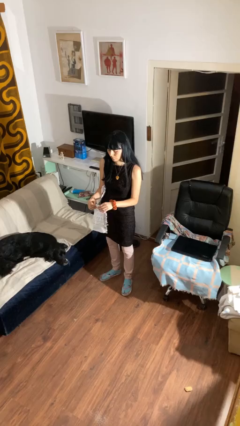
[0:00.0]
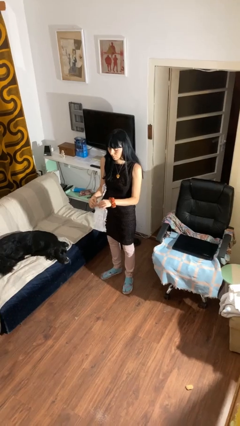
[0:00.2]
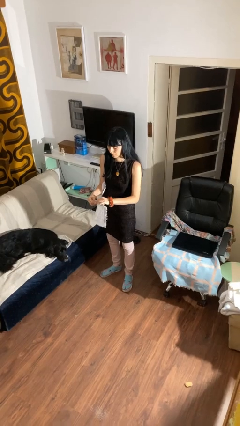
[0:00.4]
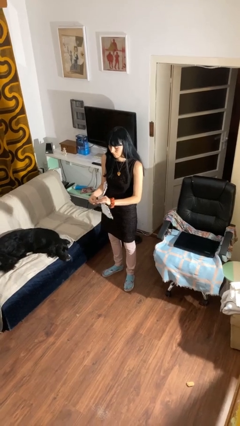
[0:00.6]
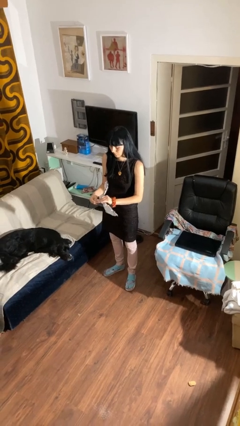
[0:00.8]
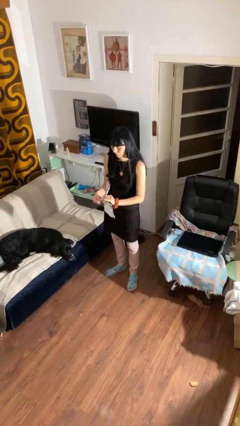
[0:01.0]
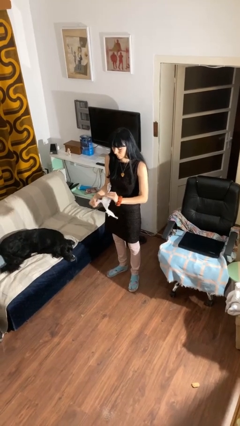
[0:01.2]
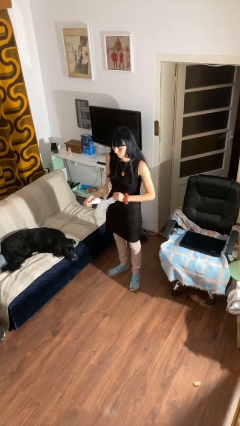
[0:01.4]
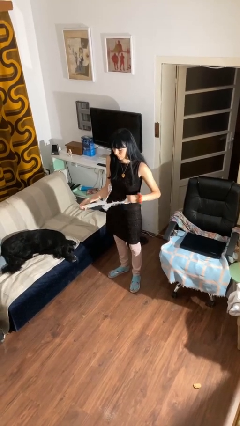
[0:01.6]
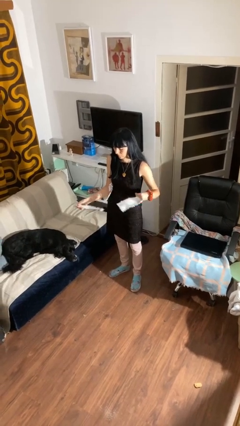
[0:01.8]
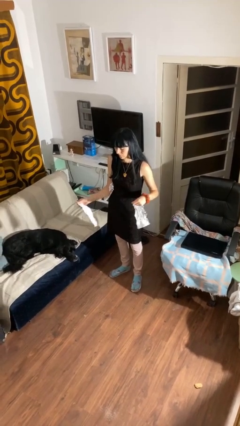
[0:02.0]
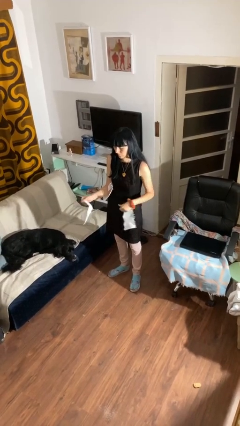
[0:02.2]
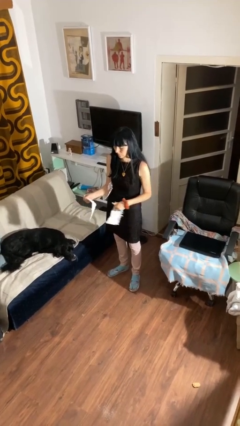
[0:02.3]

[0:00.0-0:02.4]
person tears paper

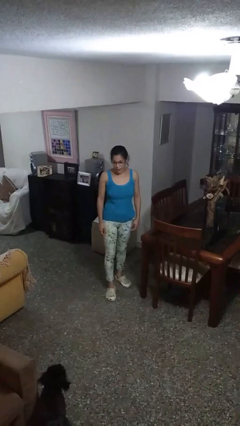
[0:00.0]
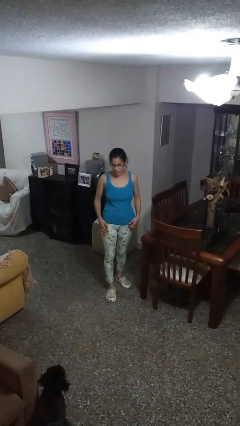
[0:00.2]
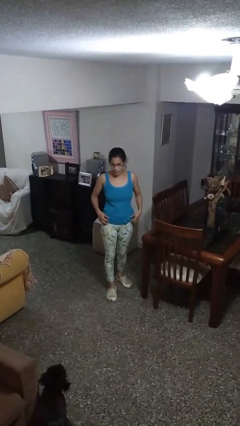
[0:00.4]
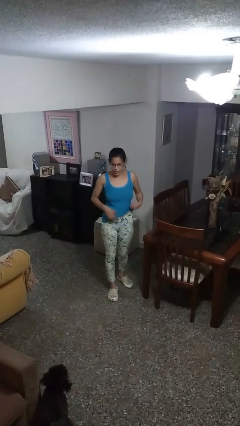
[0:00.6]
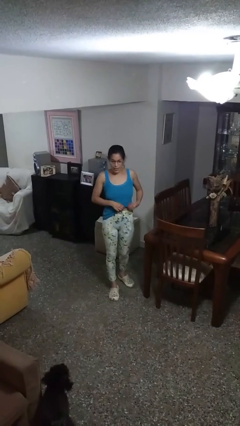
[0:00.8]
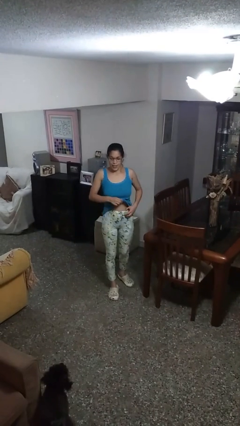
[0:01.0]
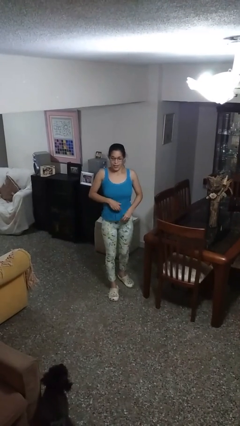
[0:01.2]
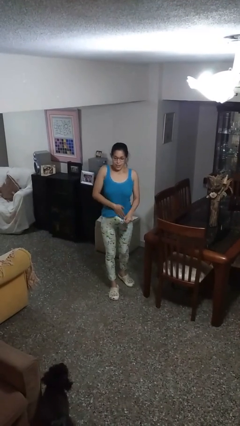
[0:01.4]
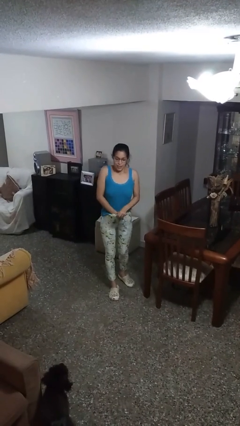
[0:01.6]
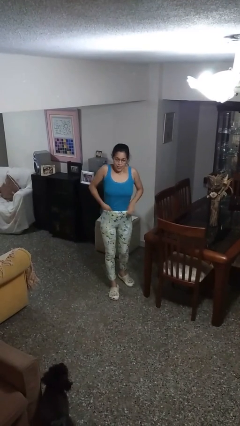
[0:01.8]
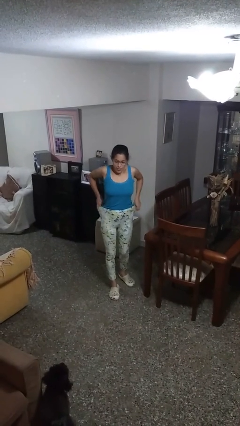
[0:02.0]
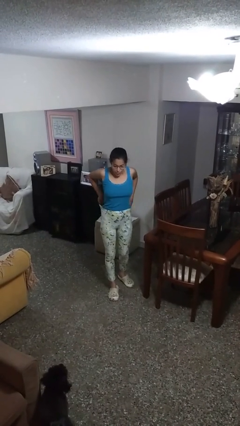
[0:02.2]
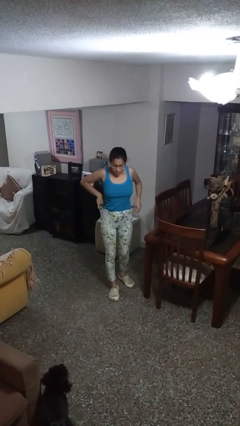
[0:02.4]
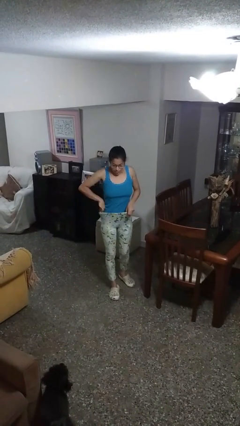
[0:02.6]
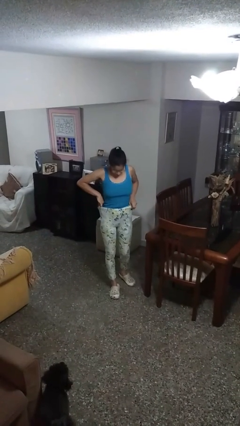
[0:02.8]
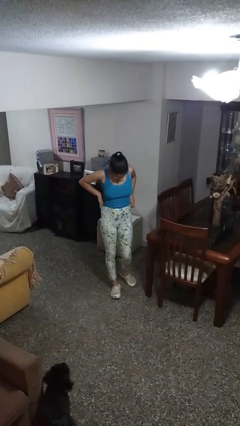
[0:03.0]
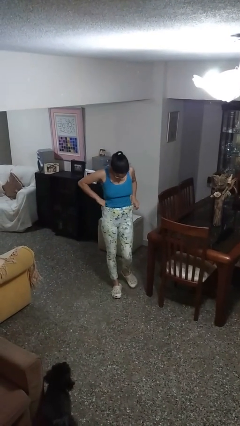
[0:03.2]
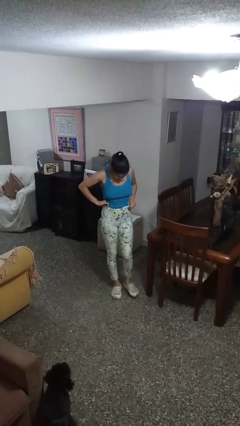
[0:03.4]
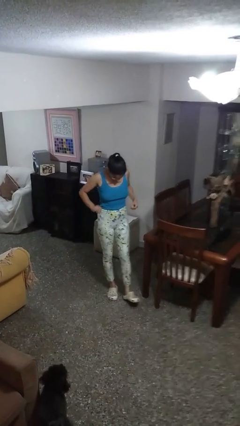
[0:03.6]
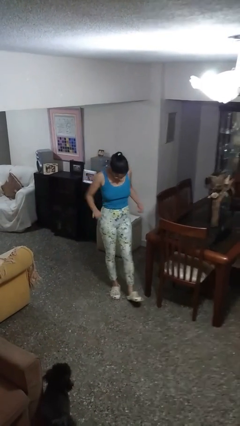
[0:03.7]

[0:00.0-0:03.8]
person tucks in shirt

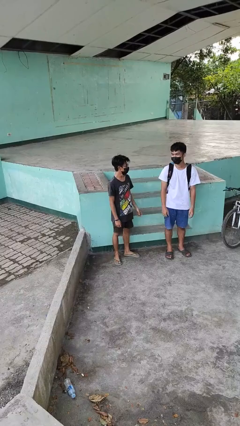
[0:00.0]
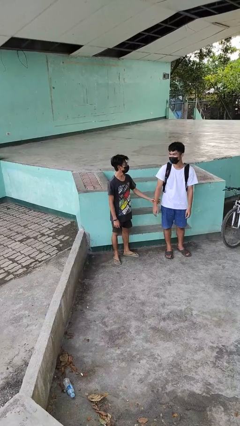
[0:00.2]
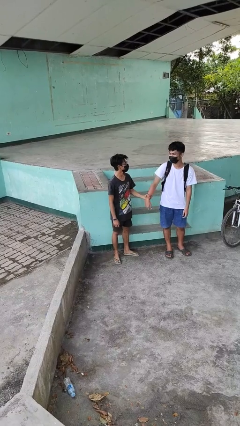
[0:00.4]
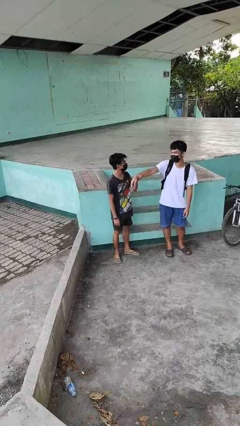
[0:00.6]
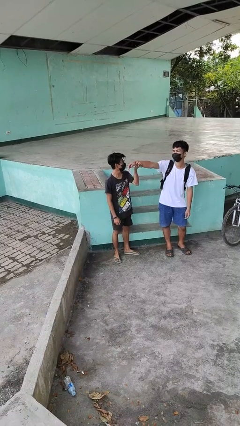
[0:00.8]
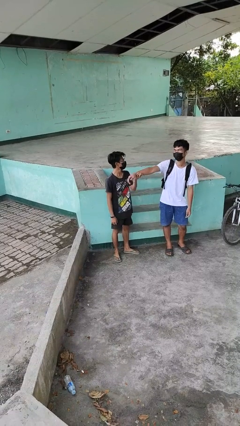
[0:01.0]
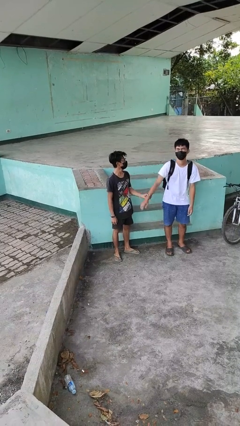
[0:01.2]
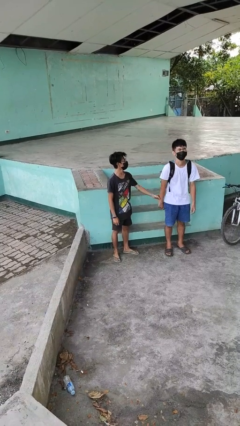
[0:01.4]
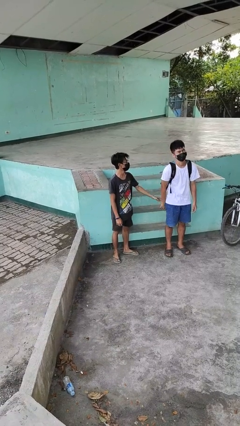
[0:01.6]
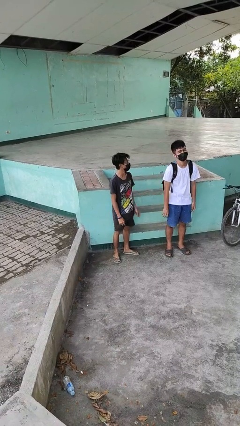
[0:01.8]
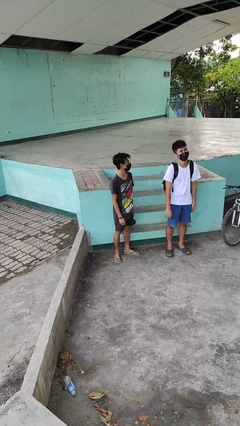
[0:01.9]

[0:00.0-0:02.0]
person grabs person by forearm

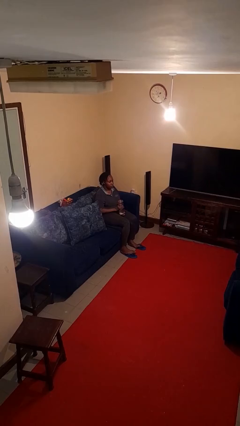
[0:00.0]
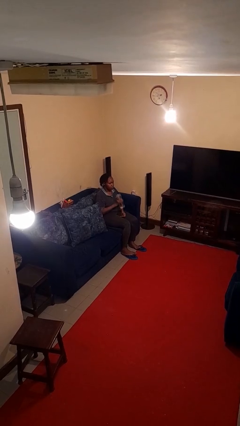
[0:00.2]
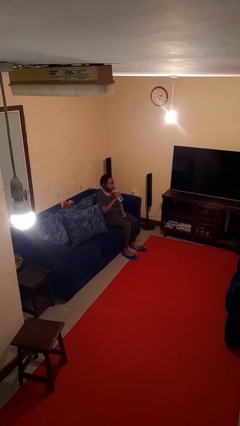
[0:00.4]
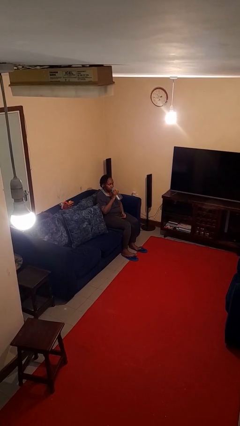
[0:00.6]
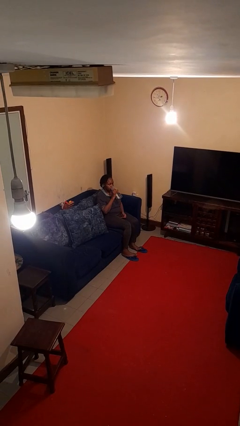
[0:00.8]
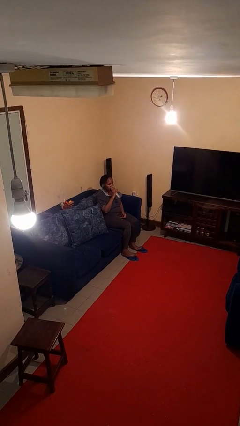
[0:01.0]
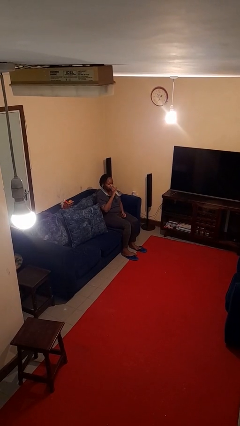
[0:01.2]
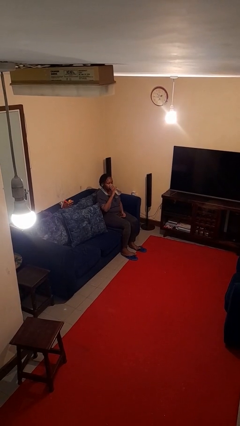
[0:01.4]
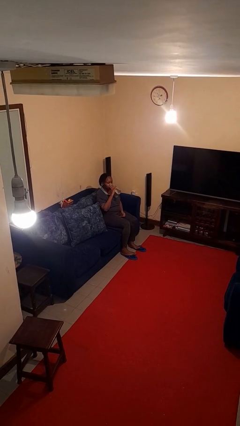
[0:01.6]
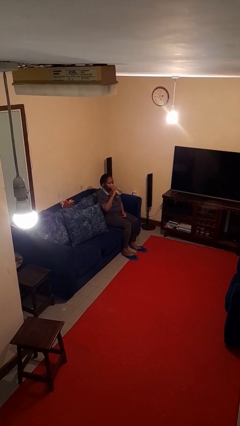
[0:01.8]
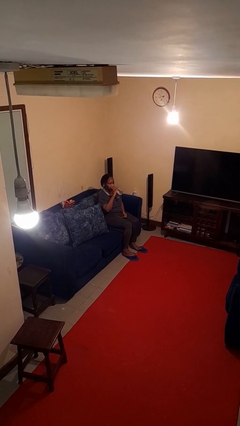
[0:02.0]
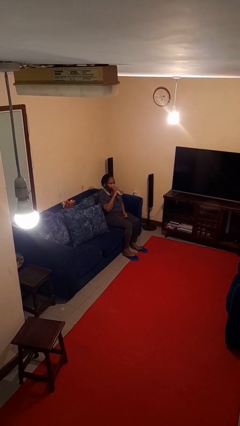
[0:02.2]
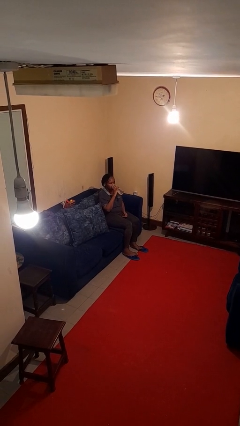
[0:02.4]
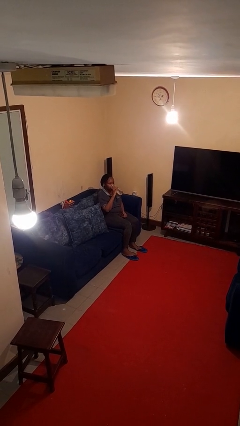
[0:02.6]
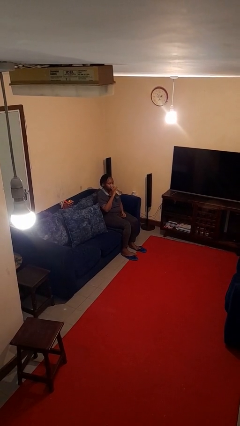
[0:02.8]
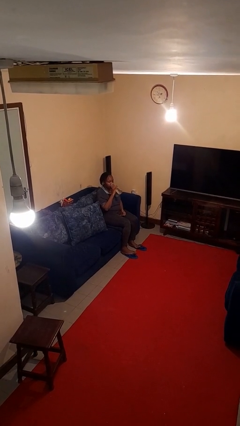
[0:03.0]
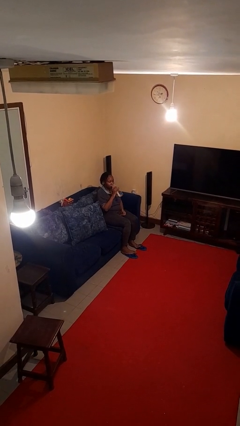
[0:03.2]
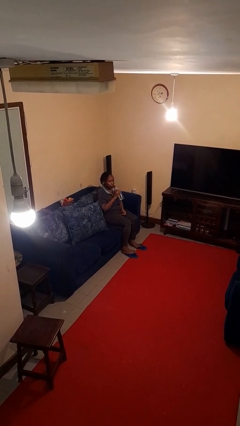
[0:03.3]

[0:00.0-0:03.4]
person drinks from bottle

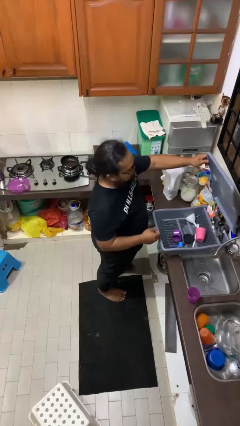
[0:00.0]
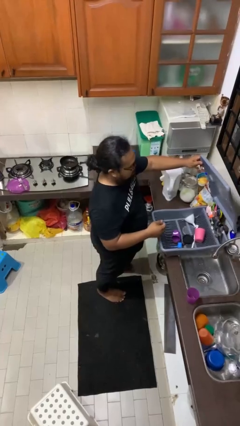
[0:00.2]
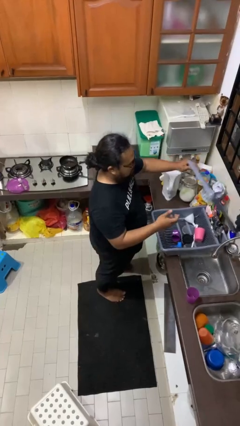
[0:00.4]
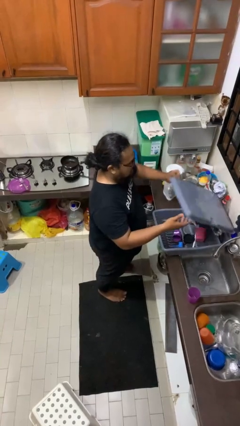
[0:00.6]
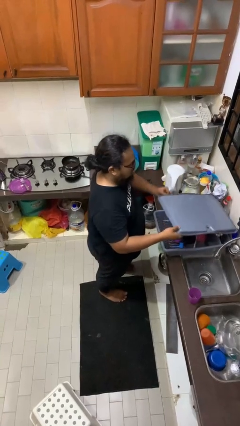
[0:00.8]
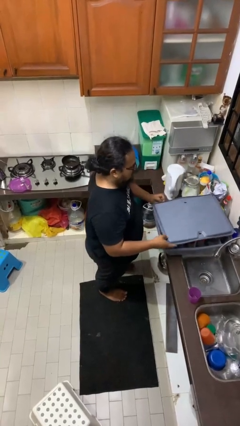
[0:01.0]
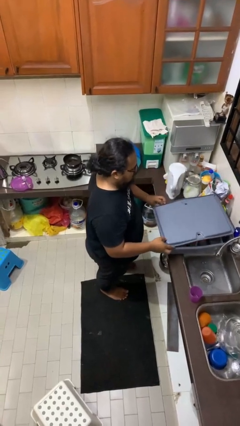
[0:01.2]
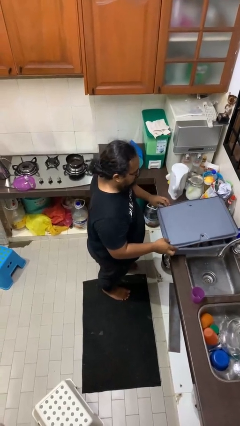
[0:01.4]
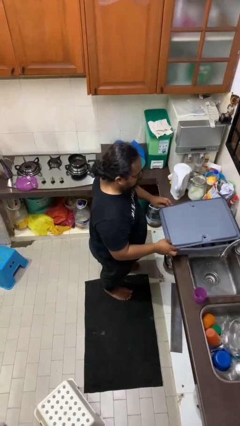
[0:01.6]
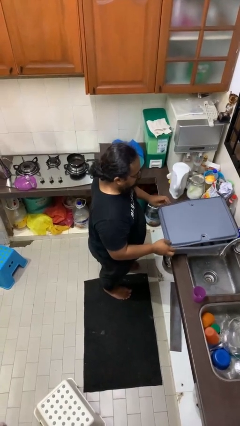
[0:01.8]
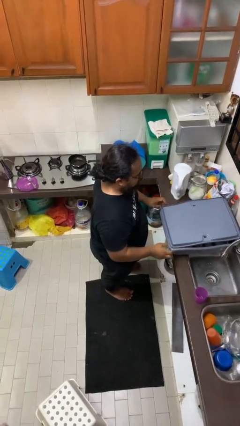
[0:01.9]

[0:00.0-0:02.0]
person closes dishwasher

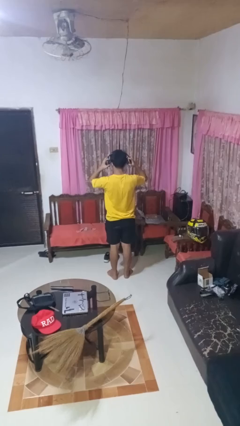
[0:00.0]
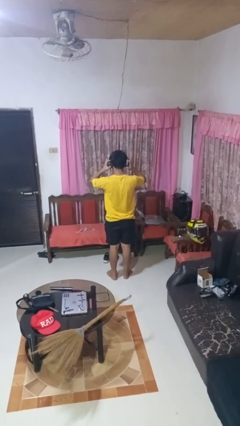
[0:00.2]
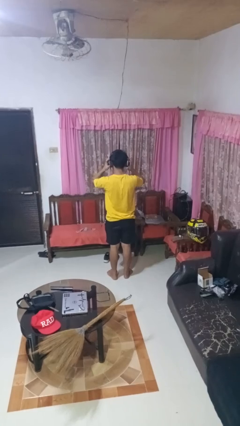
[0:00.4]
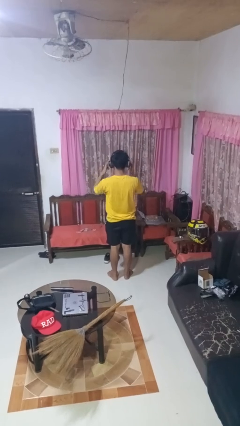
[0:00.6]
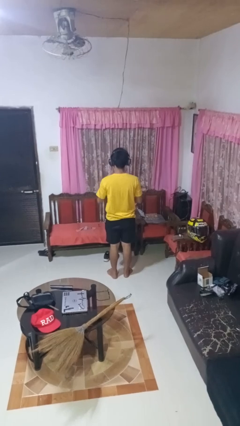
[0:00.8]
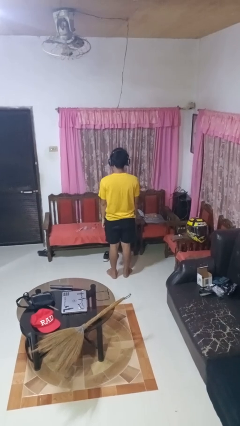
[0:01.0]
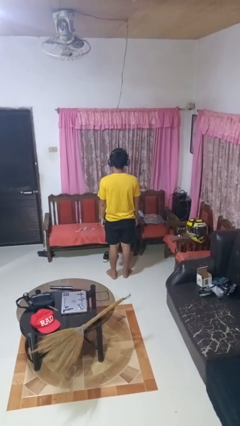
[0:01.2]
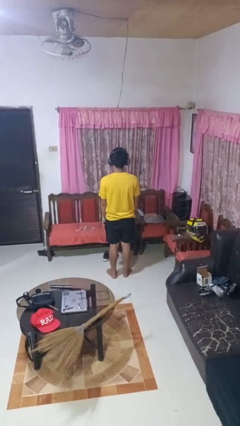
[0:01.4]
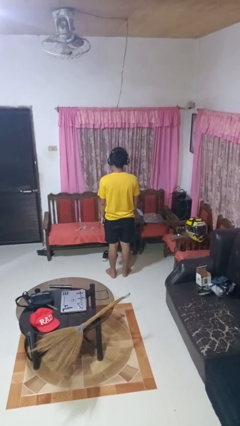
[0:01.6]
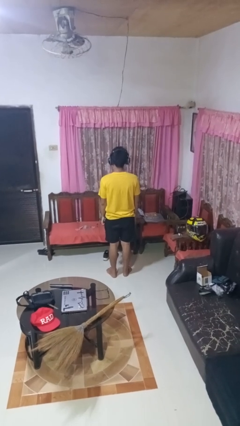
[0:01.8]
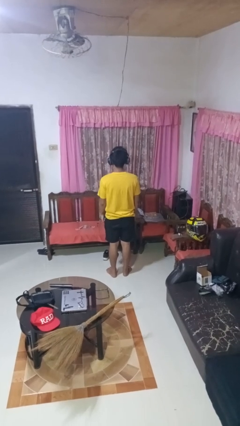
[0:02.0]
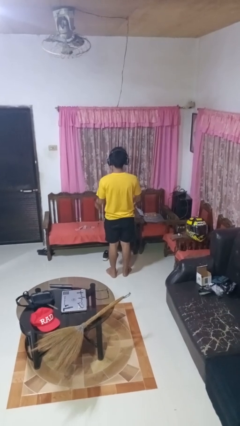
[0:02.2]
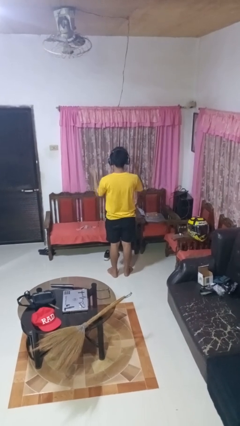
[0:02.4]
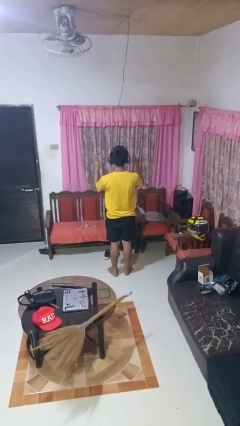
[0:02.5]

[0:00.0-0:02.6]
person puts on headphones

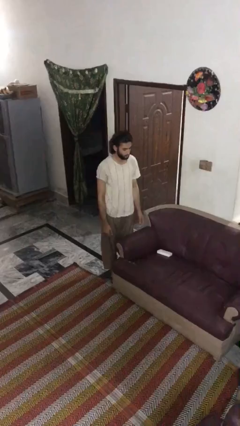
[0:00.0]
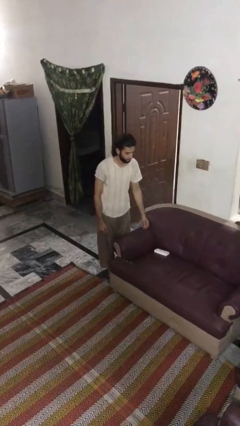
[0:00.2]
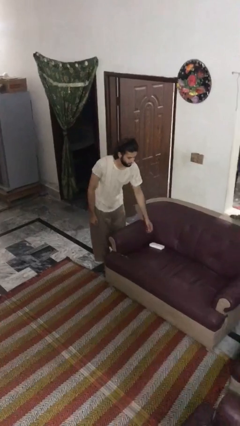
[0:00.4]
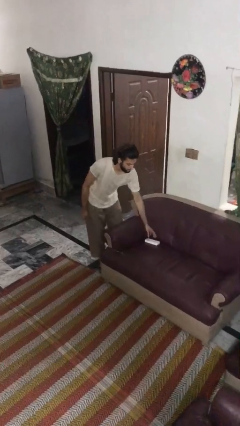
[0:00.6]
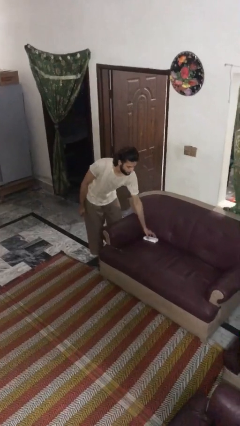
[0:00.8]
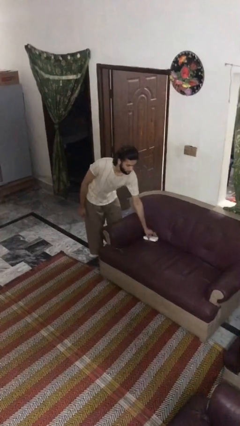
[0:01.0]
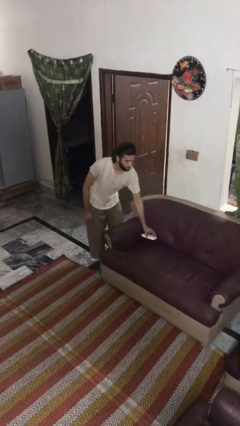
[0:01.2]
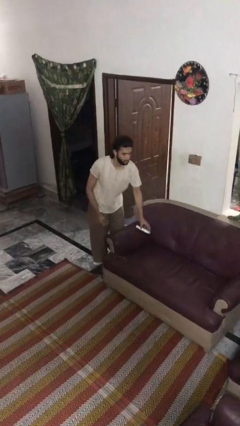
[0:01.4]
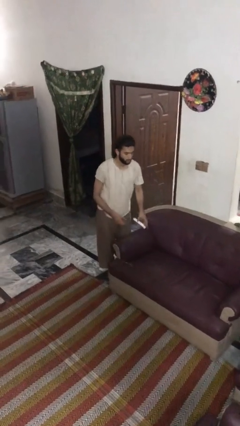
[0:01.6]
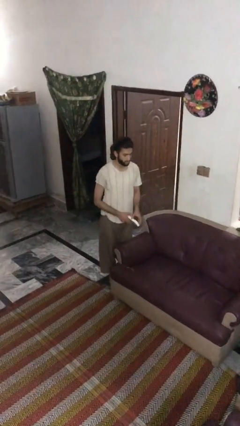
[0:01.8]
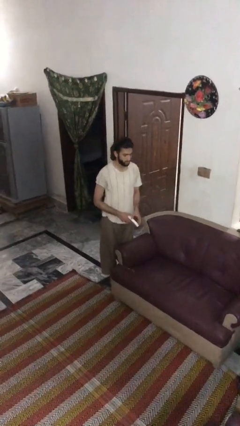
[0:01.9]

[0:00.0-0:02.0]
person picks up object from couch
